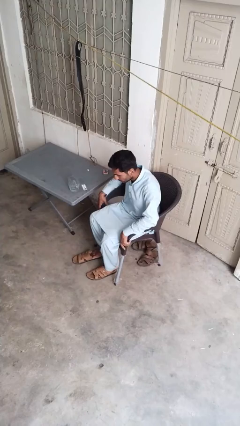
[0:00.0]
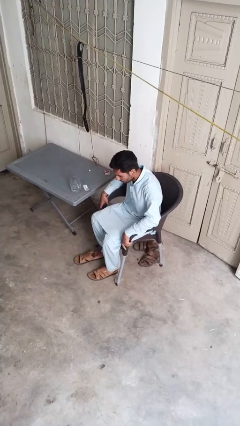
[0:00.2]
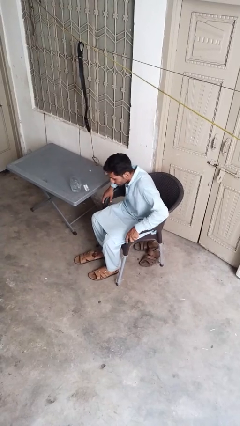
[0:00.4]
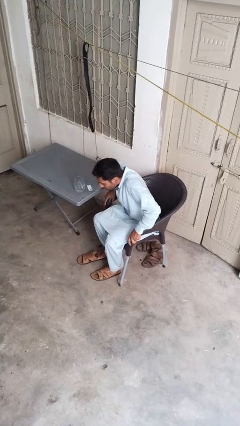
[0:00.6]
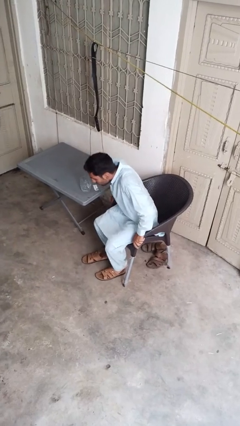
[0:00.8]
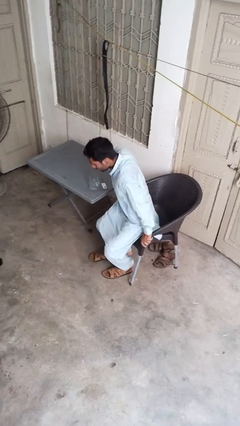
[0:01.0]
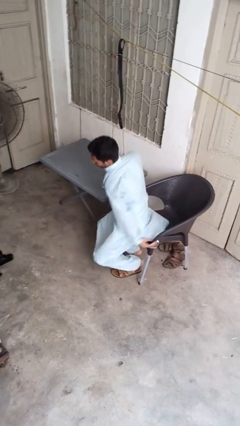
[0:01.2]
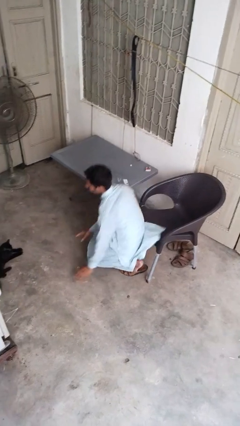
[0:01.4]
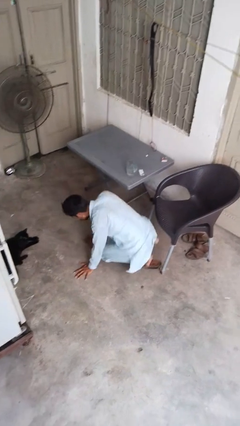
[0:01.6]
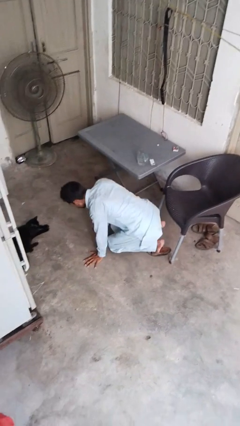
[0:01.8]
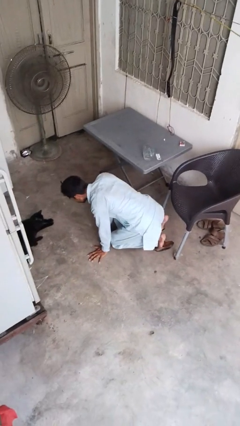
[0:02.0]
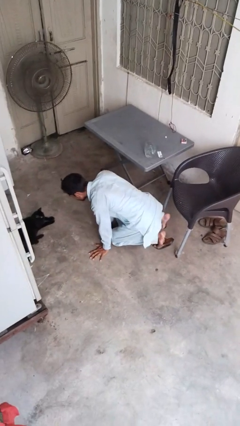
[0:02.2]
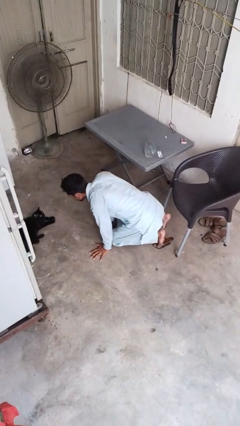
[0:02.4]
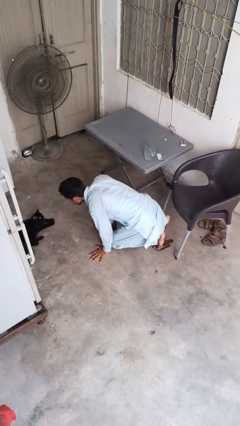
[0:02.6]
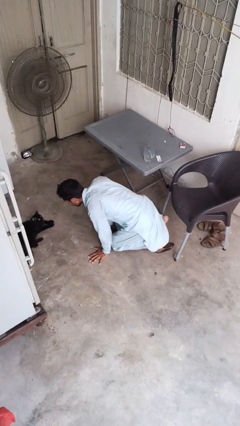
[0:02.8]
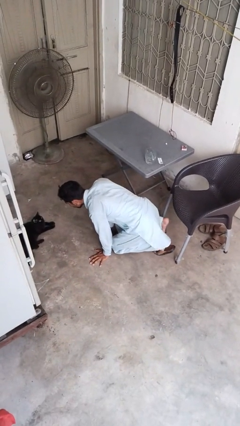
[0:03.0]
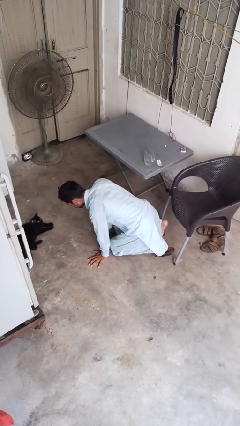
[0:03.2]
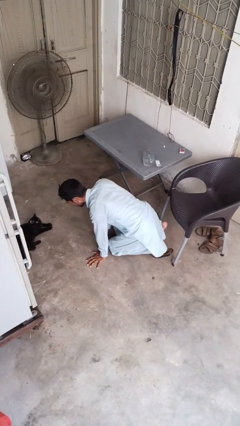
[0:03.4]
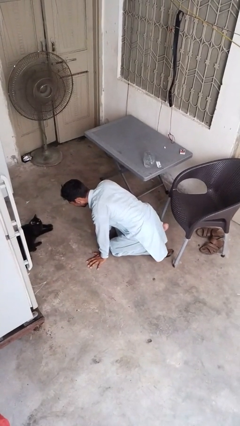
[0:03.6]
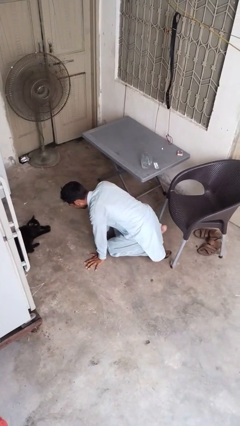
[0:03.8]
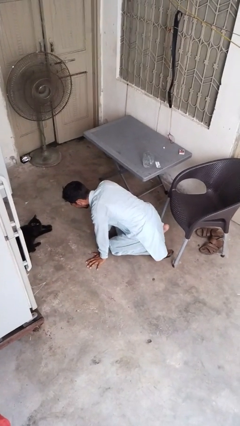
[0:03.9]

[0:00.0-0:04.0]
person falls from chair

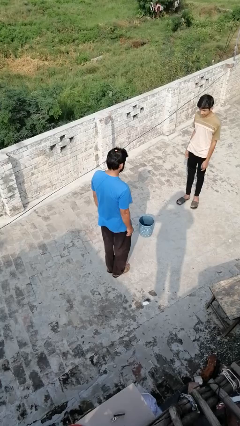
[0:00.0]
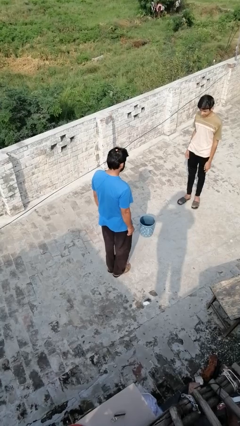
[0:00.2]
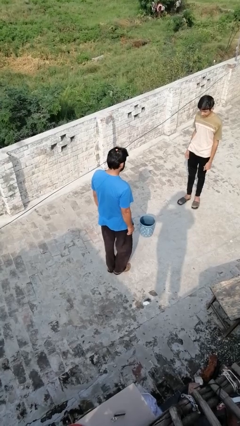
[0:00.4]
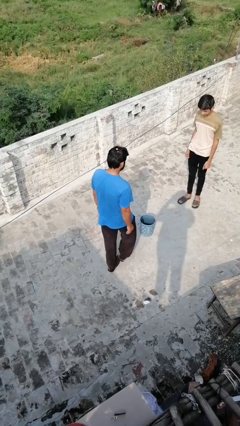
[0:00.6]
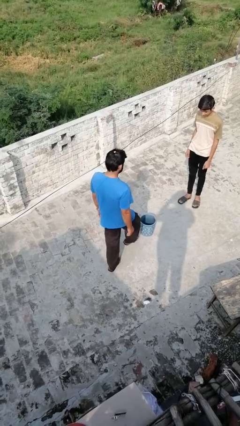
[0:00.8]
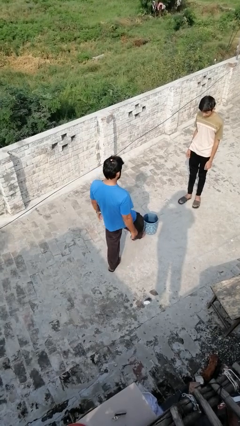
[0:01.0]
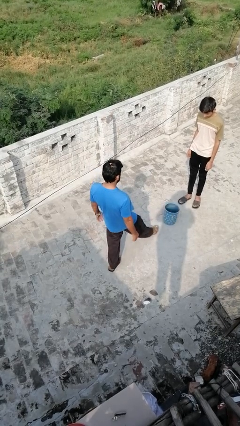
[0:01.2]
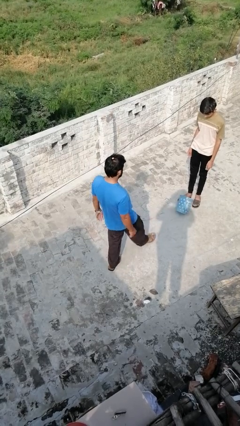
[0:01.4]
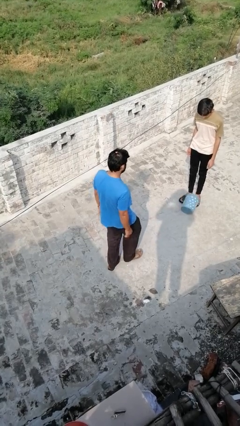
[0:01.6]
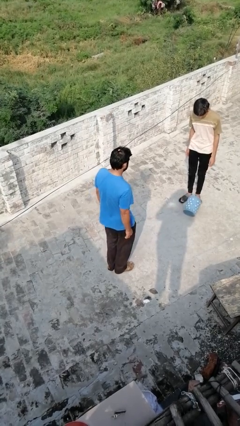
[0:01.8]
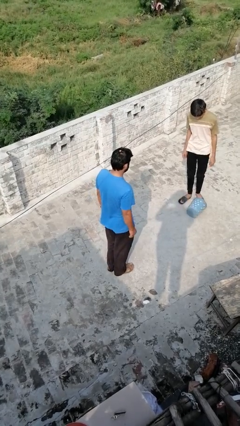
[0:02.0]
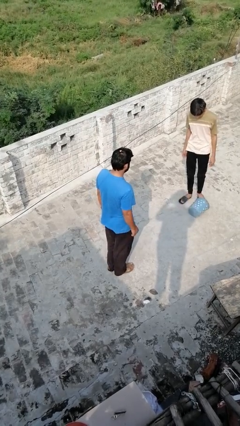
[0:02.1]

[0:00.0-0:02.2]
person kicks object to person

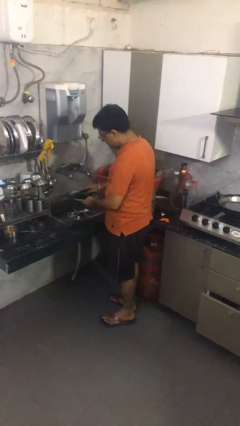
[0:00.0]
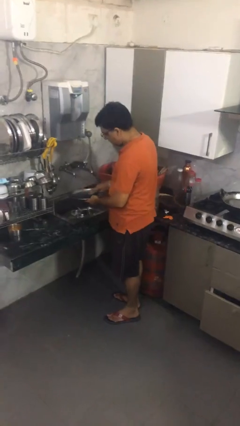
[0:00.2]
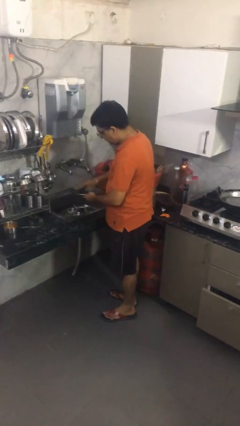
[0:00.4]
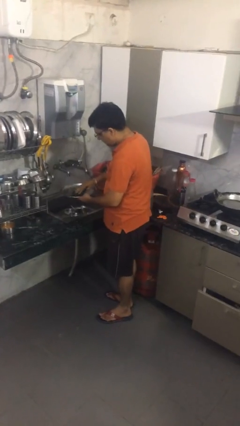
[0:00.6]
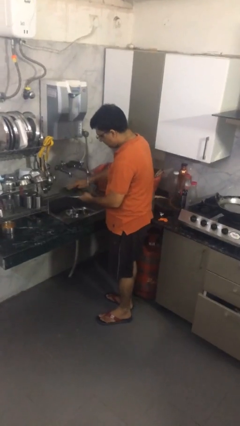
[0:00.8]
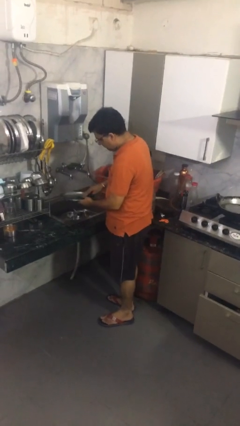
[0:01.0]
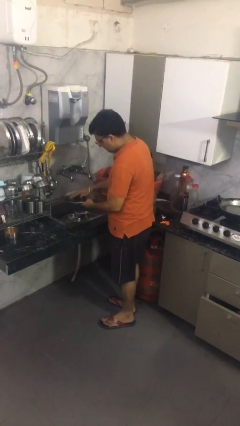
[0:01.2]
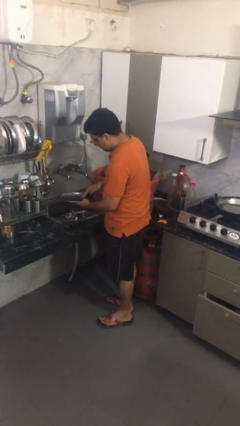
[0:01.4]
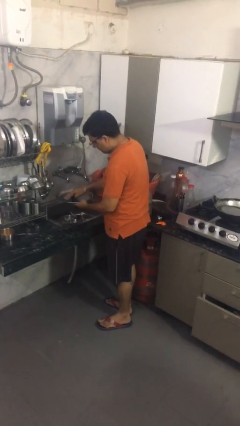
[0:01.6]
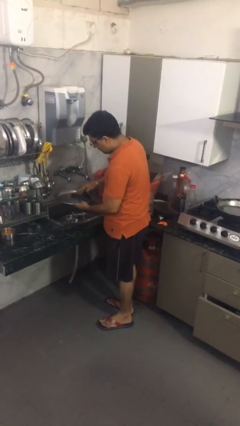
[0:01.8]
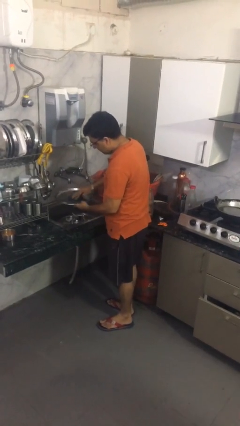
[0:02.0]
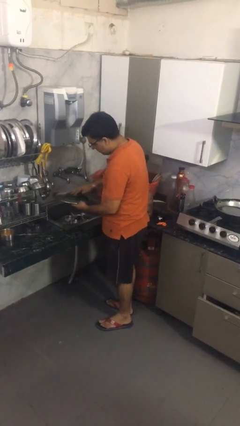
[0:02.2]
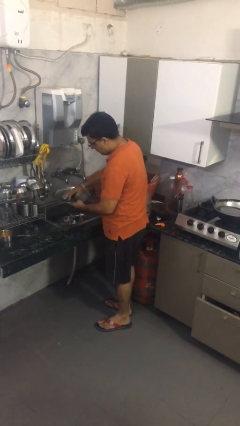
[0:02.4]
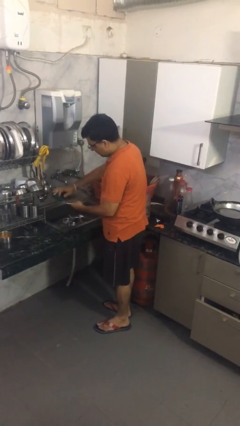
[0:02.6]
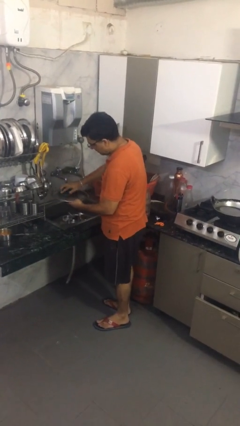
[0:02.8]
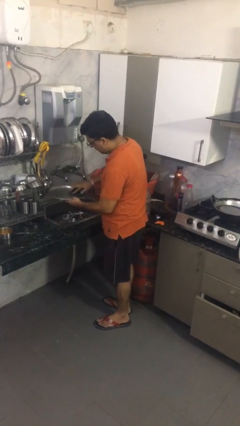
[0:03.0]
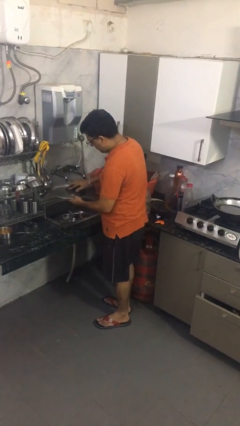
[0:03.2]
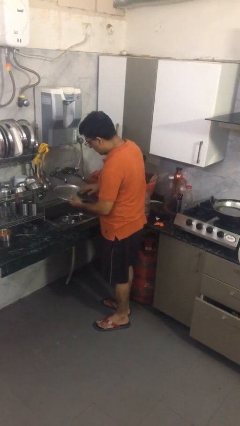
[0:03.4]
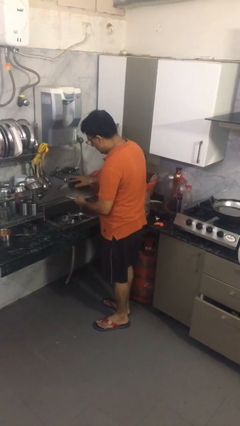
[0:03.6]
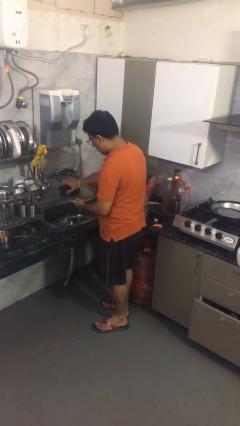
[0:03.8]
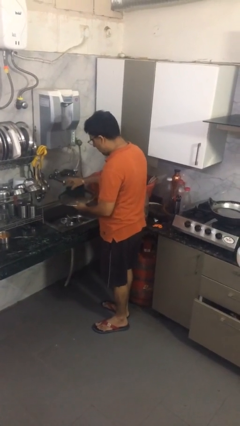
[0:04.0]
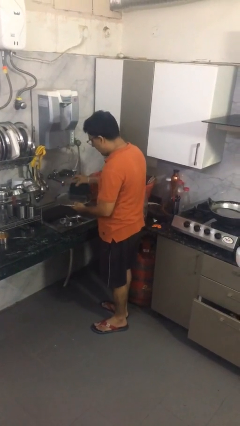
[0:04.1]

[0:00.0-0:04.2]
person washes dish

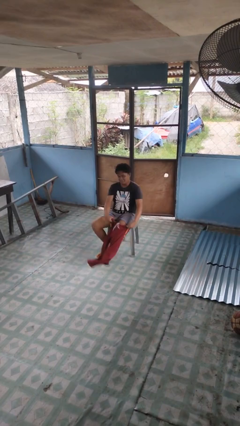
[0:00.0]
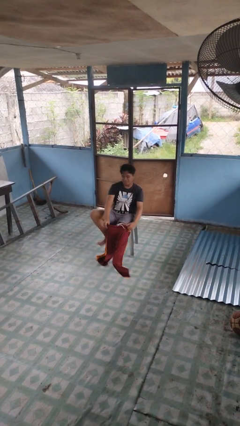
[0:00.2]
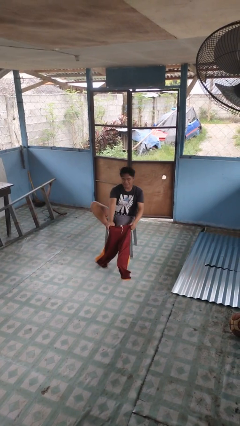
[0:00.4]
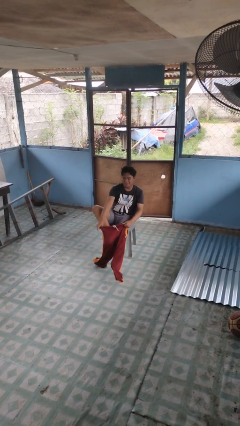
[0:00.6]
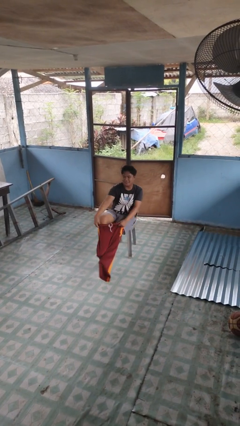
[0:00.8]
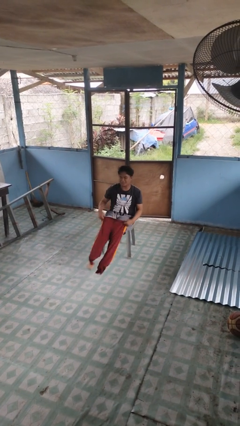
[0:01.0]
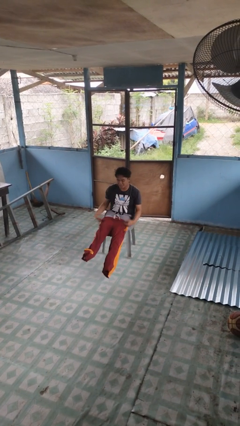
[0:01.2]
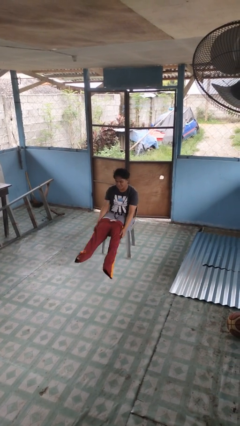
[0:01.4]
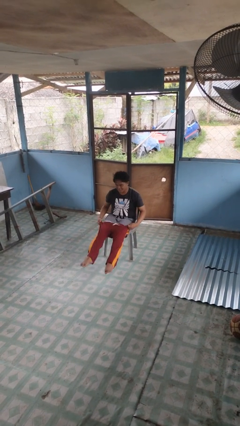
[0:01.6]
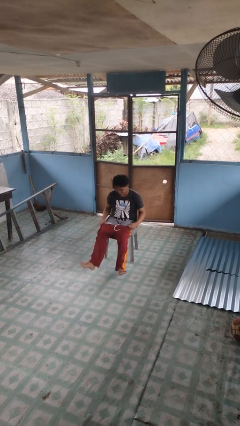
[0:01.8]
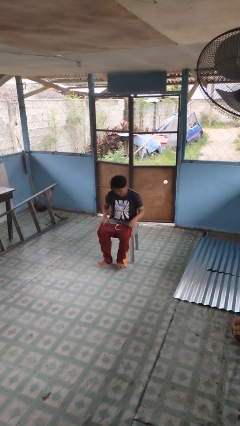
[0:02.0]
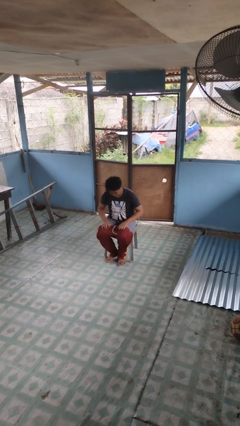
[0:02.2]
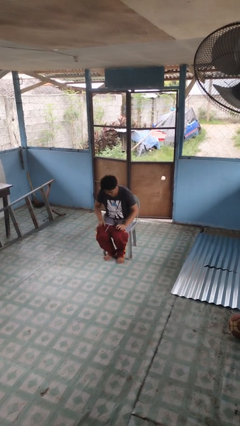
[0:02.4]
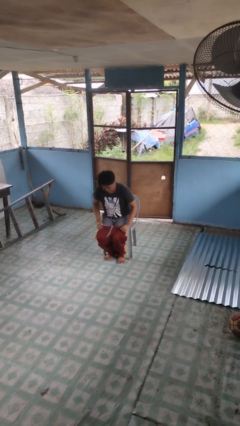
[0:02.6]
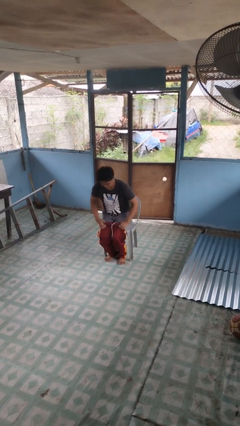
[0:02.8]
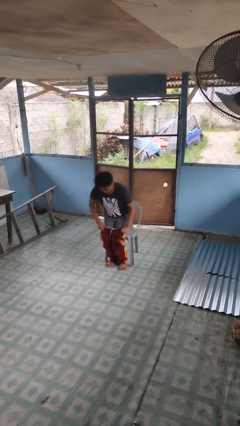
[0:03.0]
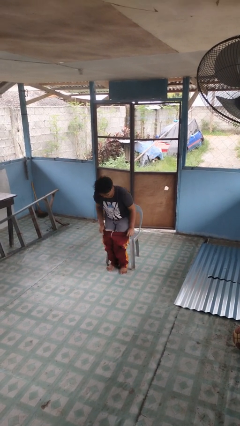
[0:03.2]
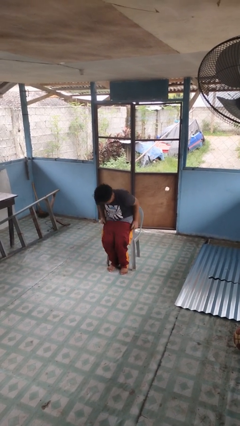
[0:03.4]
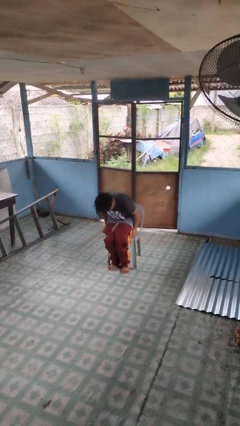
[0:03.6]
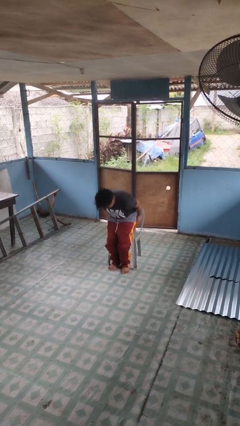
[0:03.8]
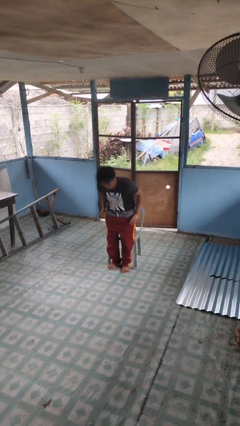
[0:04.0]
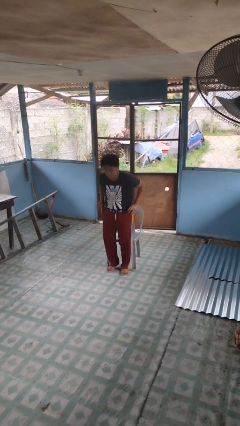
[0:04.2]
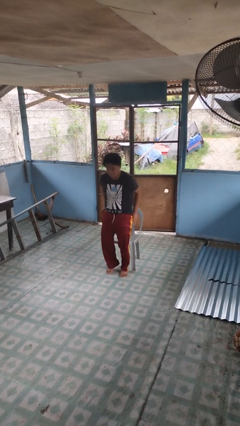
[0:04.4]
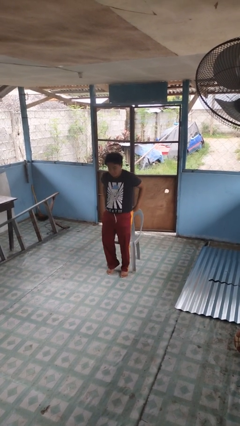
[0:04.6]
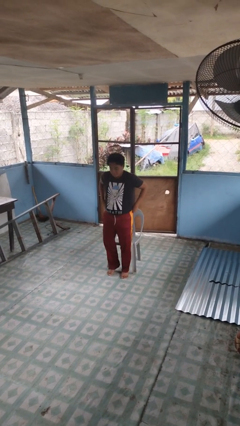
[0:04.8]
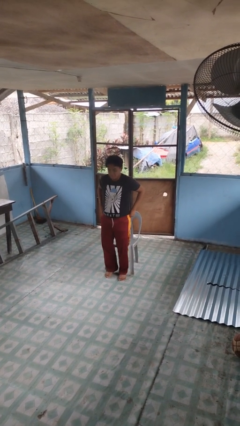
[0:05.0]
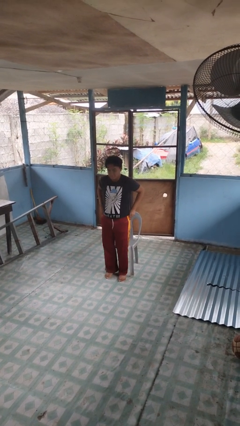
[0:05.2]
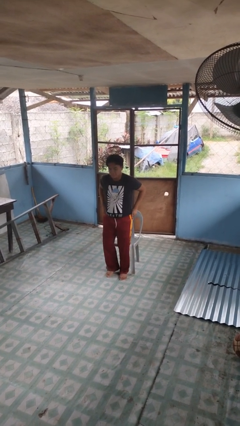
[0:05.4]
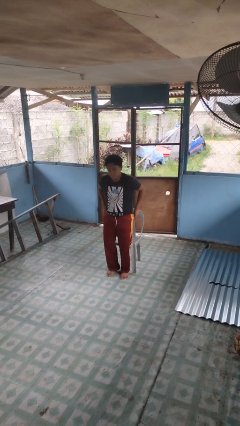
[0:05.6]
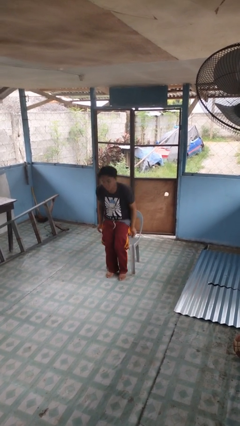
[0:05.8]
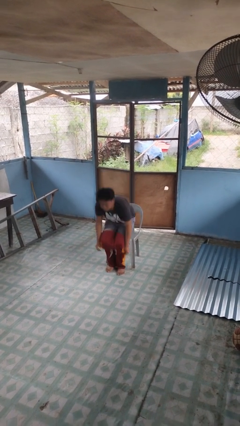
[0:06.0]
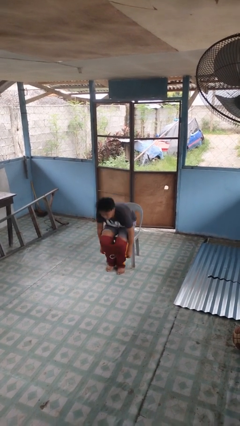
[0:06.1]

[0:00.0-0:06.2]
person puts on pants

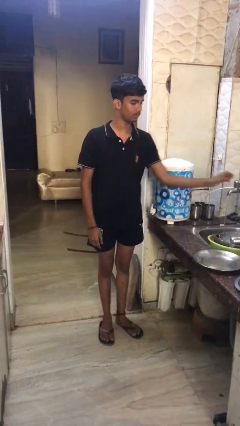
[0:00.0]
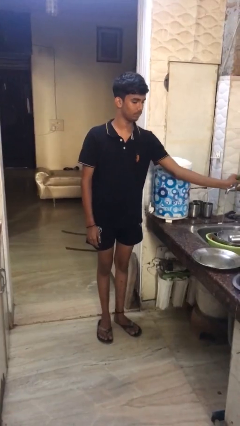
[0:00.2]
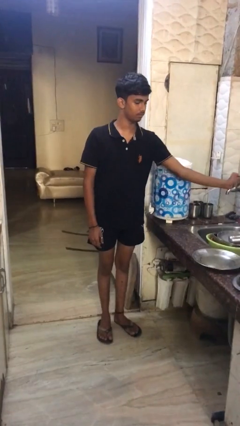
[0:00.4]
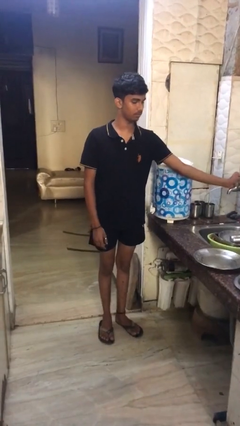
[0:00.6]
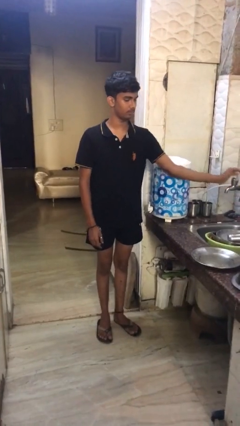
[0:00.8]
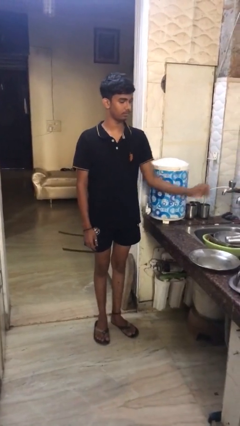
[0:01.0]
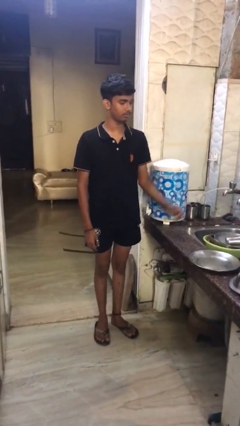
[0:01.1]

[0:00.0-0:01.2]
person turns off faucet
